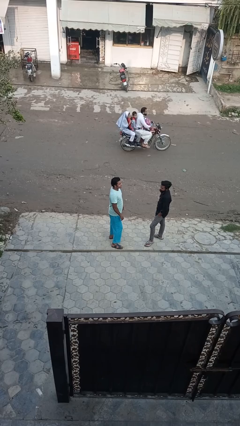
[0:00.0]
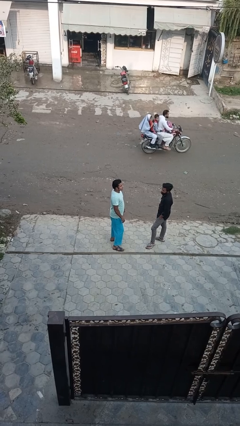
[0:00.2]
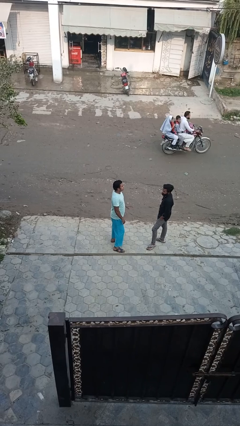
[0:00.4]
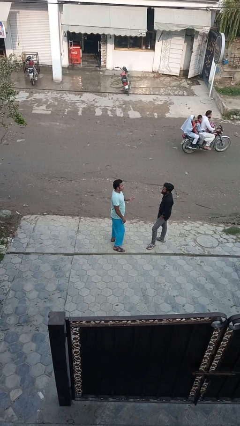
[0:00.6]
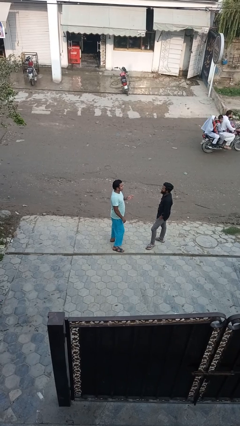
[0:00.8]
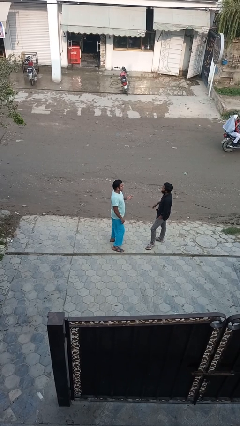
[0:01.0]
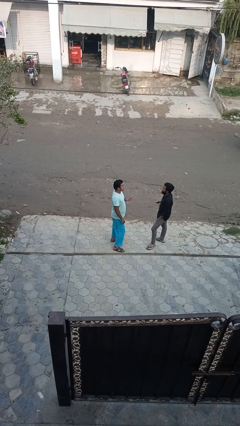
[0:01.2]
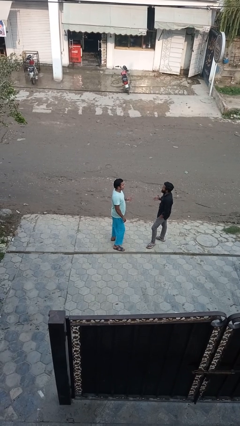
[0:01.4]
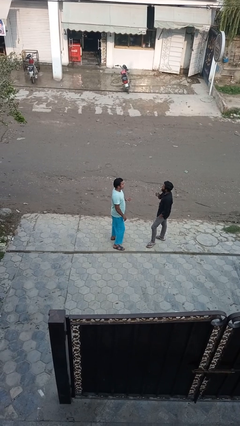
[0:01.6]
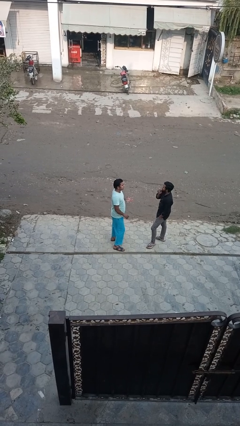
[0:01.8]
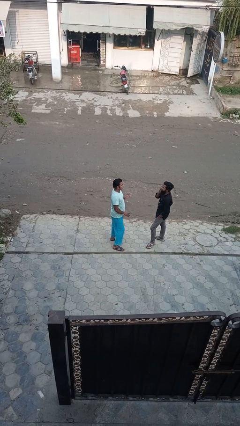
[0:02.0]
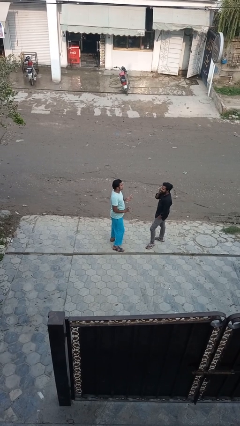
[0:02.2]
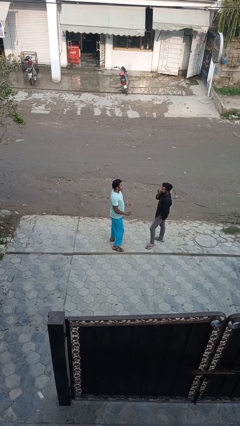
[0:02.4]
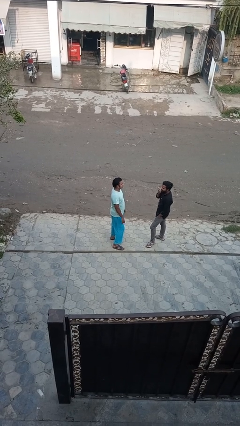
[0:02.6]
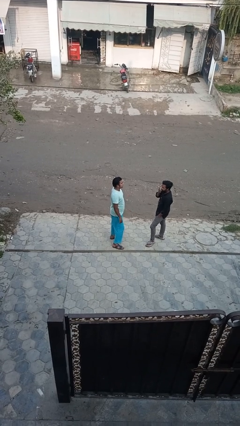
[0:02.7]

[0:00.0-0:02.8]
person talks to person

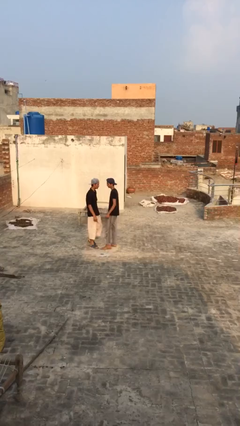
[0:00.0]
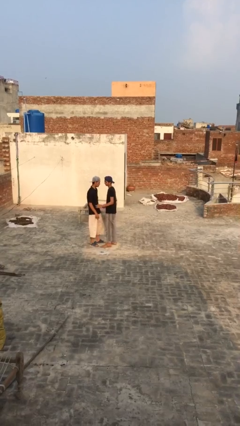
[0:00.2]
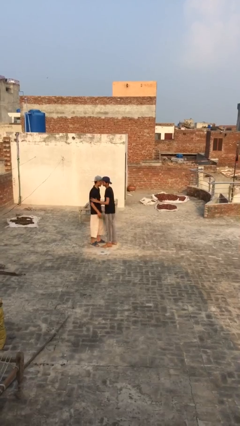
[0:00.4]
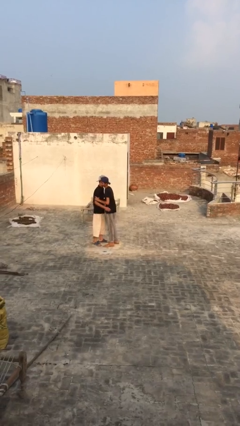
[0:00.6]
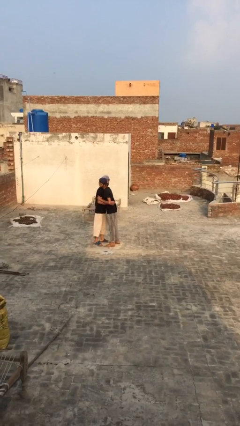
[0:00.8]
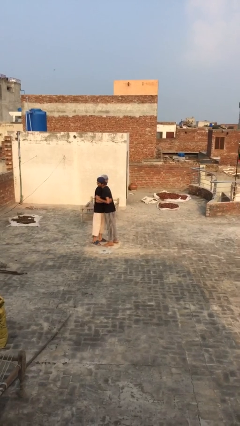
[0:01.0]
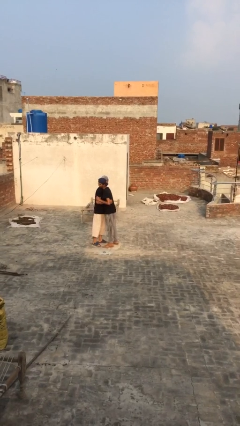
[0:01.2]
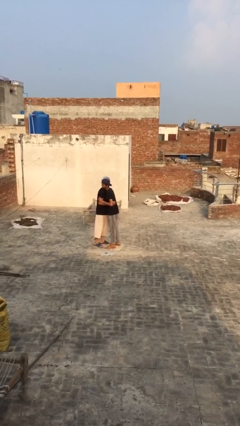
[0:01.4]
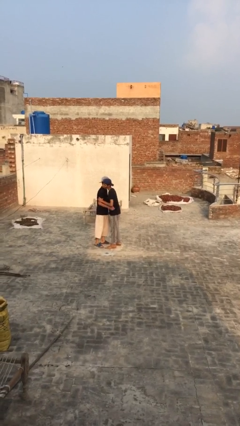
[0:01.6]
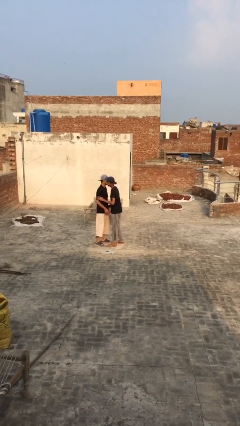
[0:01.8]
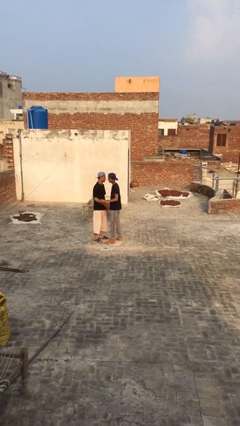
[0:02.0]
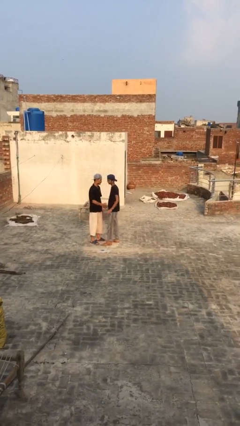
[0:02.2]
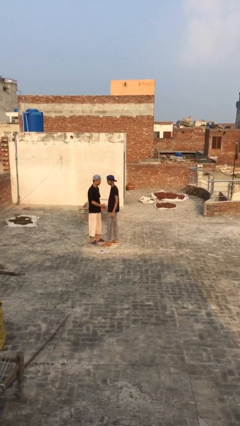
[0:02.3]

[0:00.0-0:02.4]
person embraces person

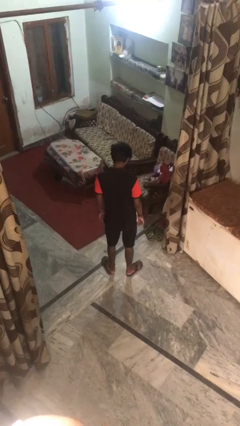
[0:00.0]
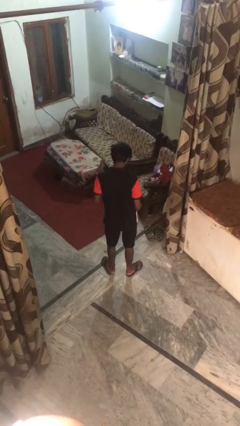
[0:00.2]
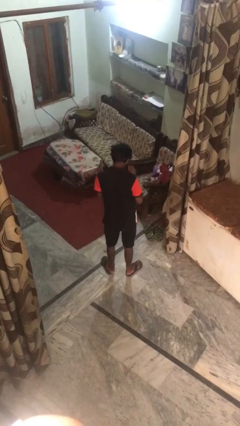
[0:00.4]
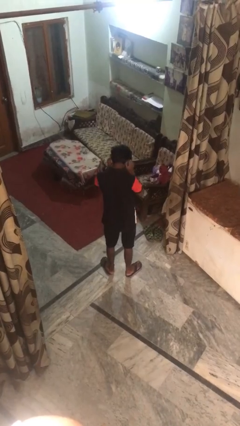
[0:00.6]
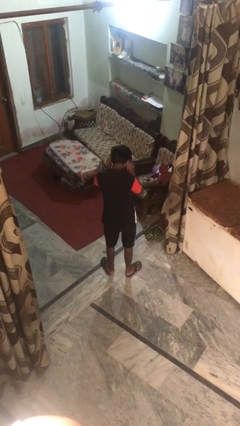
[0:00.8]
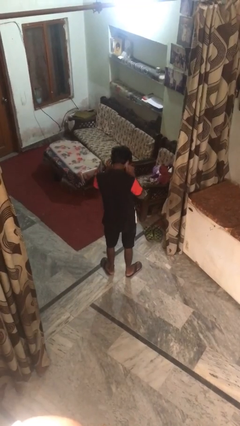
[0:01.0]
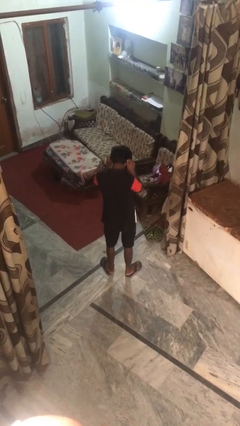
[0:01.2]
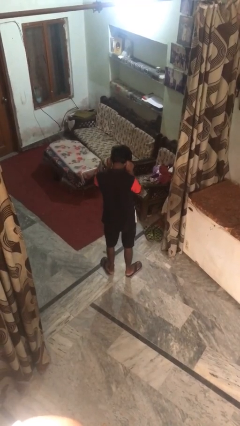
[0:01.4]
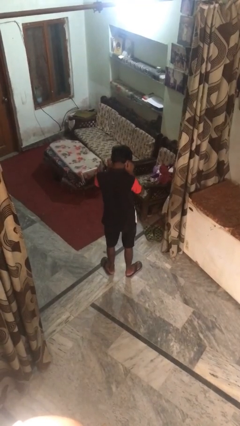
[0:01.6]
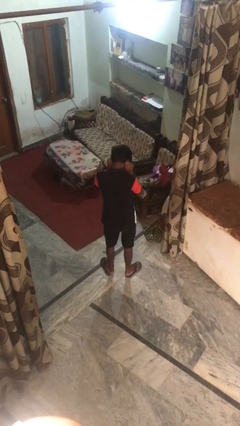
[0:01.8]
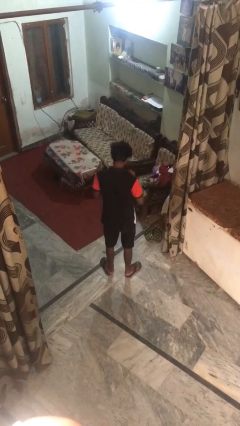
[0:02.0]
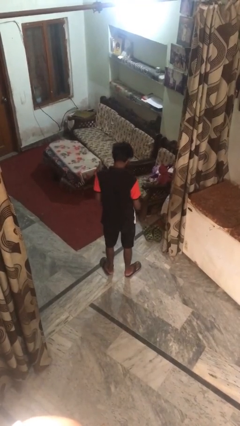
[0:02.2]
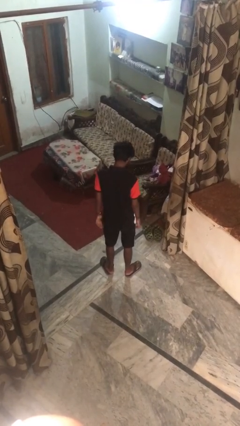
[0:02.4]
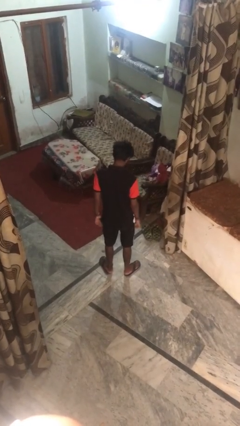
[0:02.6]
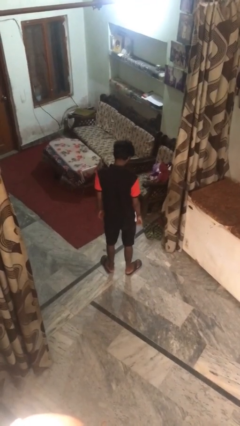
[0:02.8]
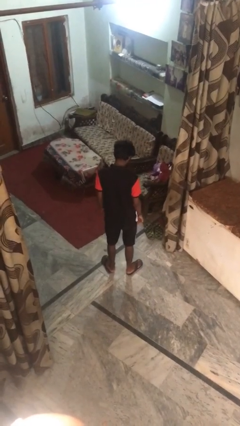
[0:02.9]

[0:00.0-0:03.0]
person touches earlobe

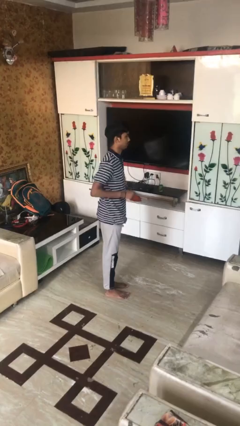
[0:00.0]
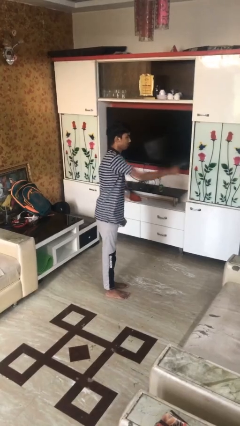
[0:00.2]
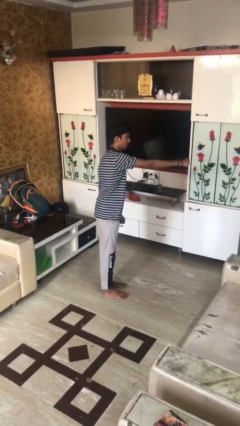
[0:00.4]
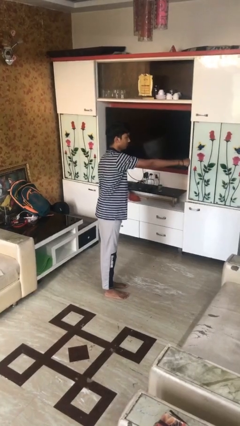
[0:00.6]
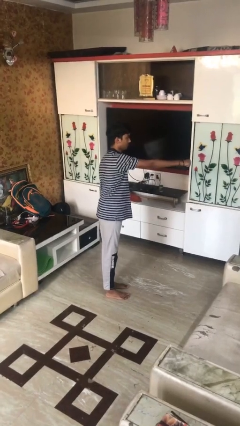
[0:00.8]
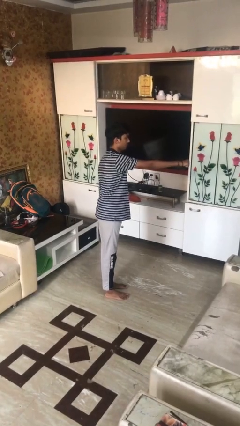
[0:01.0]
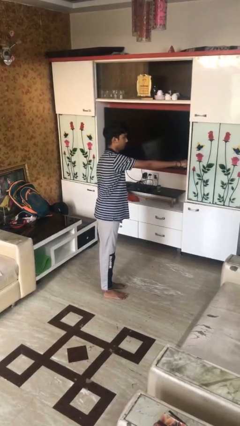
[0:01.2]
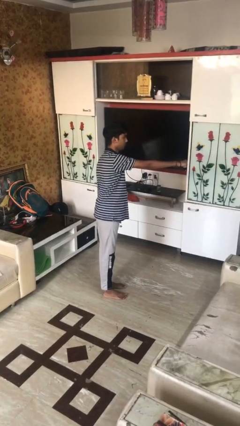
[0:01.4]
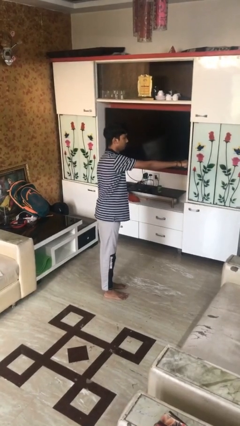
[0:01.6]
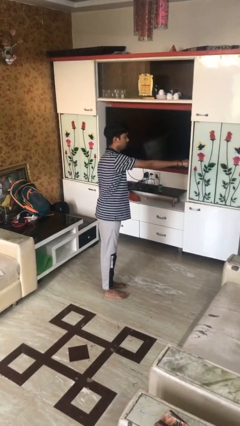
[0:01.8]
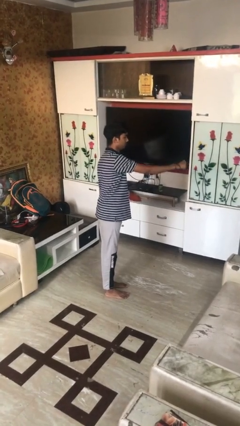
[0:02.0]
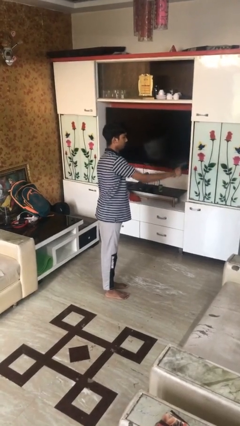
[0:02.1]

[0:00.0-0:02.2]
person punches

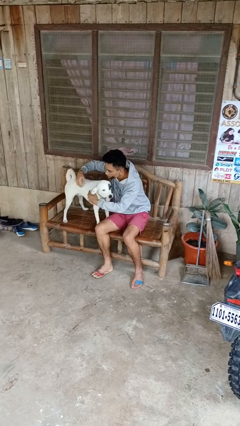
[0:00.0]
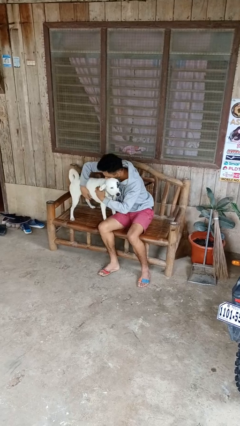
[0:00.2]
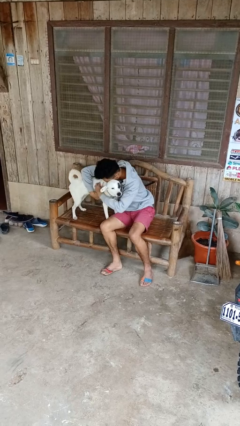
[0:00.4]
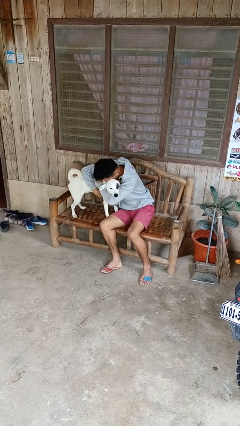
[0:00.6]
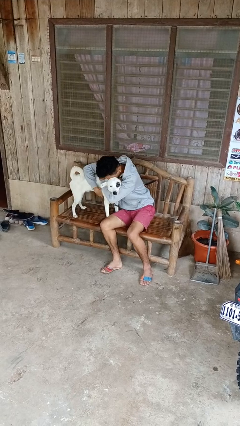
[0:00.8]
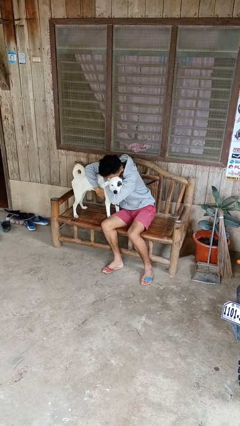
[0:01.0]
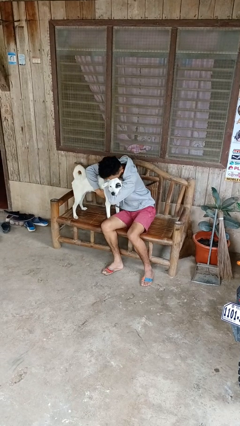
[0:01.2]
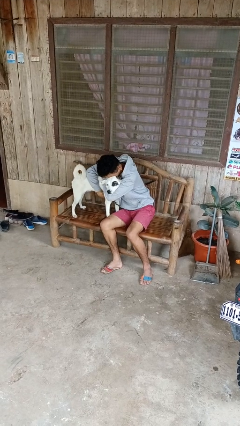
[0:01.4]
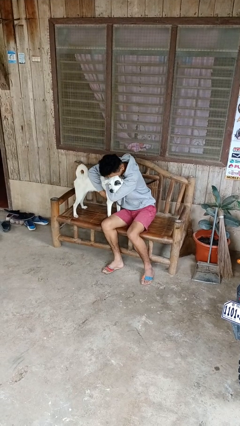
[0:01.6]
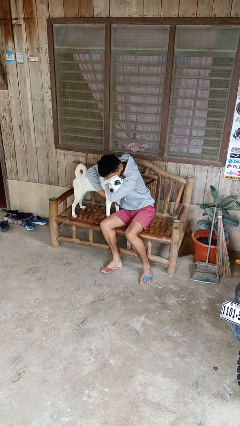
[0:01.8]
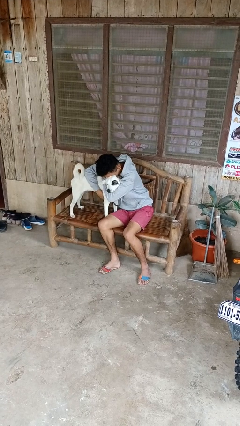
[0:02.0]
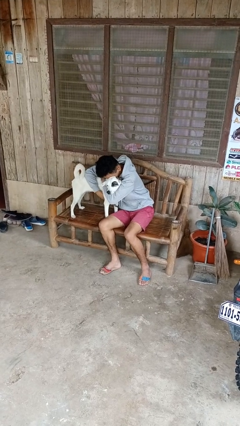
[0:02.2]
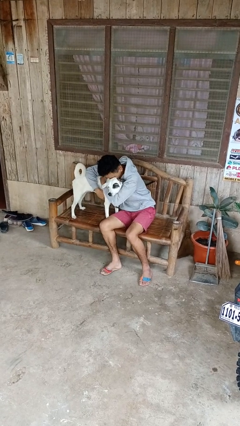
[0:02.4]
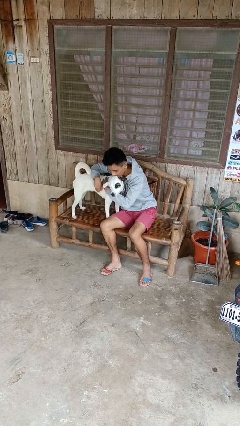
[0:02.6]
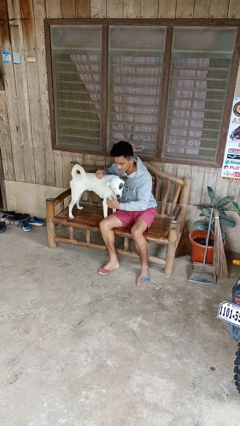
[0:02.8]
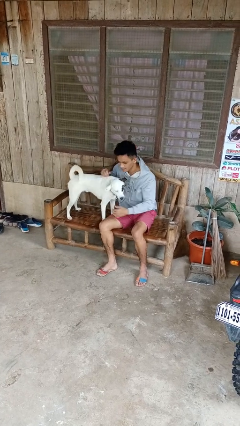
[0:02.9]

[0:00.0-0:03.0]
person hugs dog

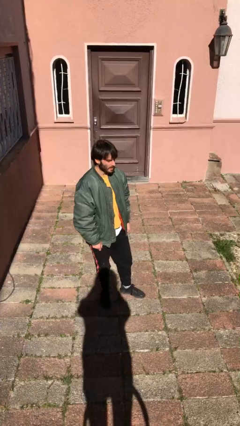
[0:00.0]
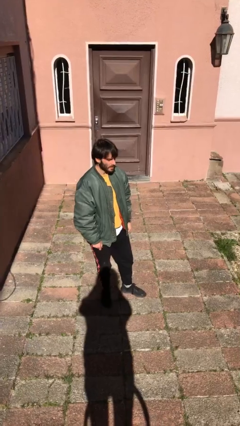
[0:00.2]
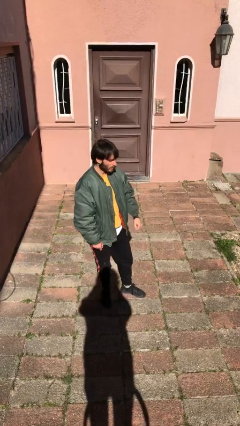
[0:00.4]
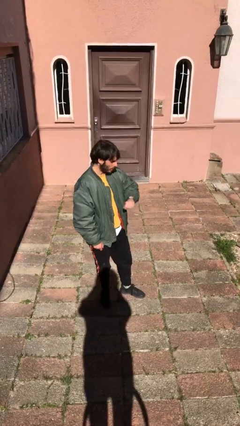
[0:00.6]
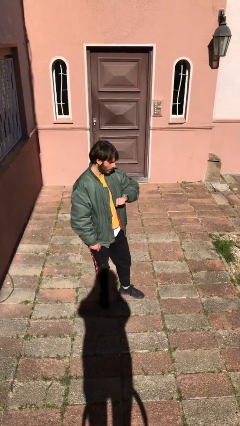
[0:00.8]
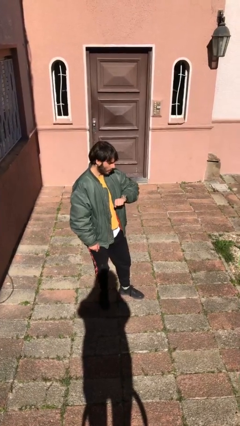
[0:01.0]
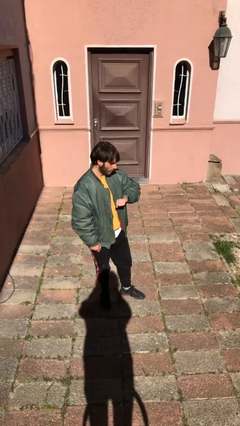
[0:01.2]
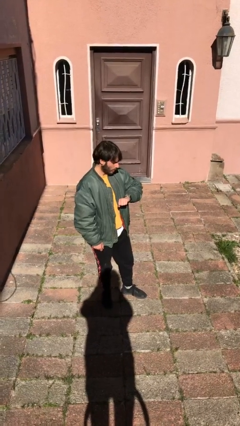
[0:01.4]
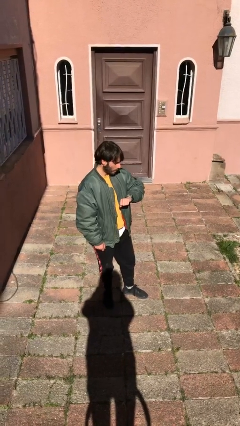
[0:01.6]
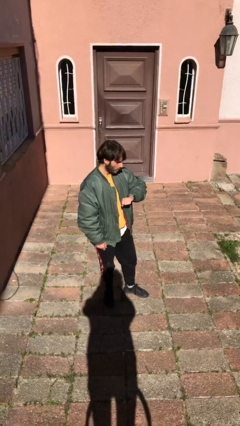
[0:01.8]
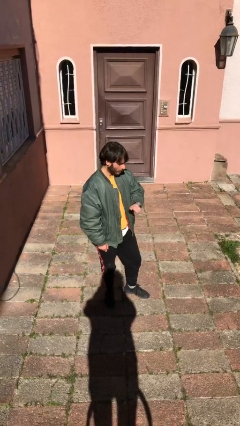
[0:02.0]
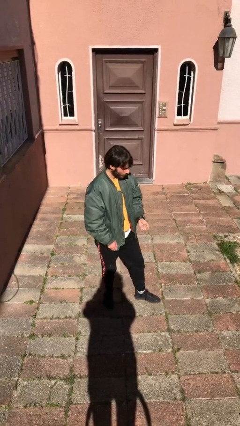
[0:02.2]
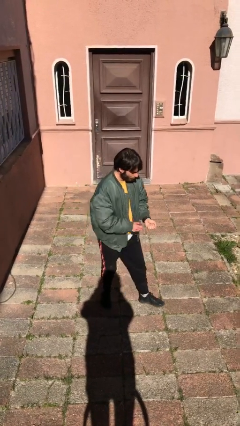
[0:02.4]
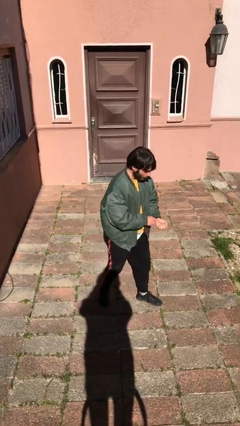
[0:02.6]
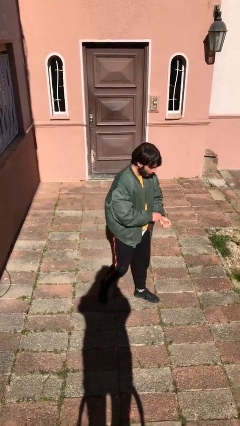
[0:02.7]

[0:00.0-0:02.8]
person looks at wristwatch

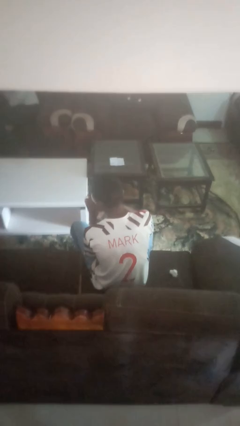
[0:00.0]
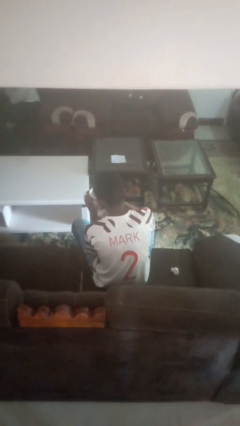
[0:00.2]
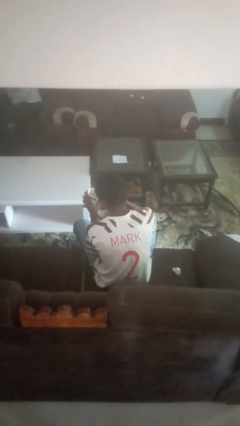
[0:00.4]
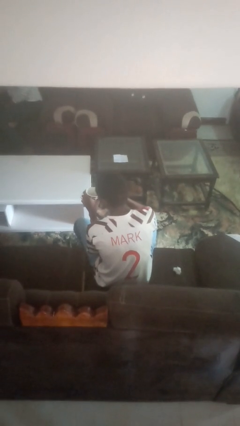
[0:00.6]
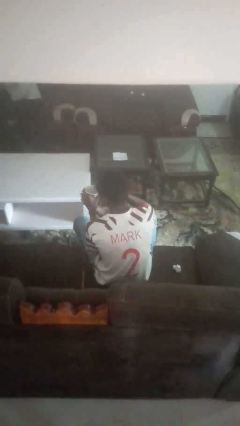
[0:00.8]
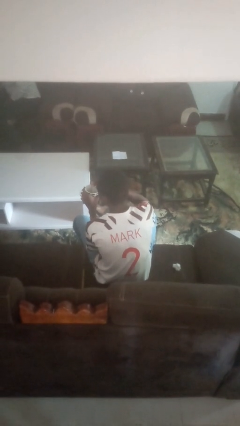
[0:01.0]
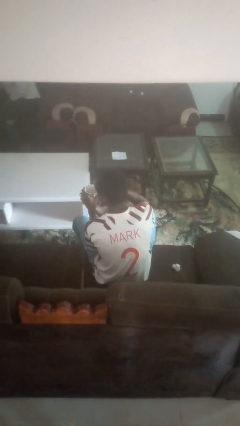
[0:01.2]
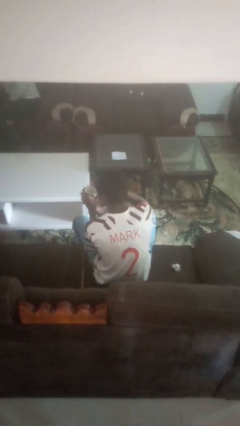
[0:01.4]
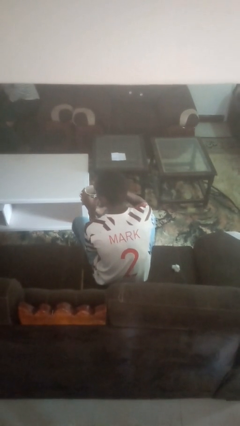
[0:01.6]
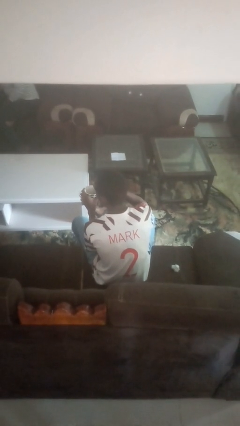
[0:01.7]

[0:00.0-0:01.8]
person stirs mug
